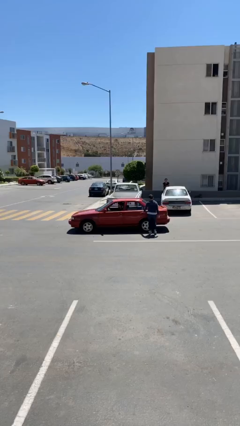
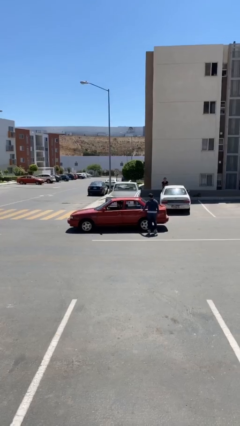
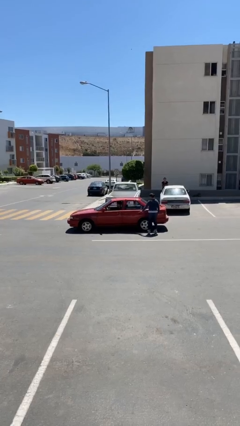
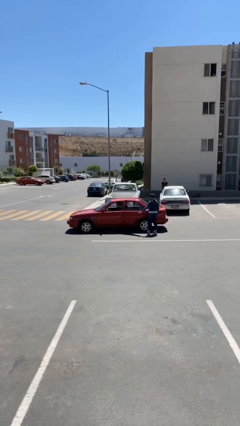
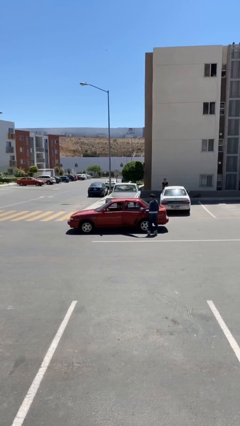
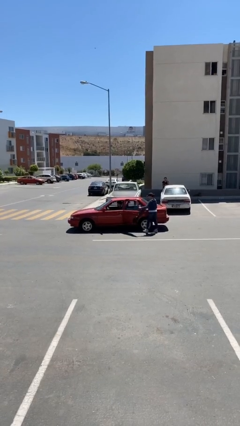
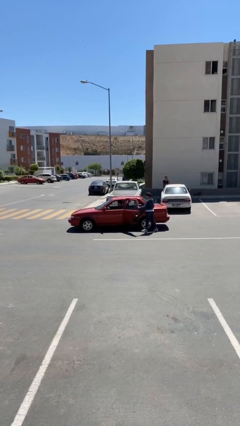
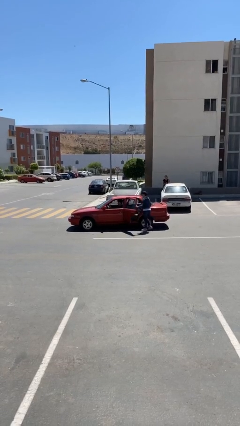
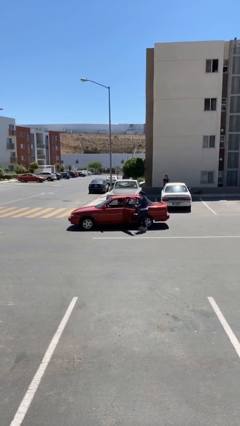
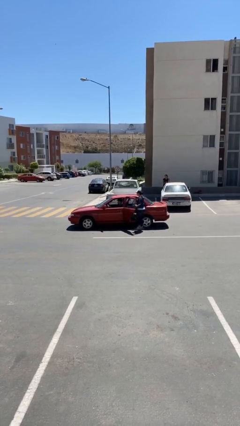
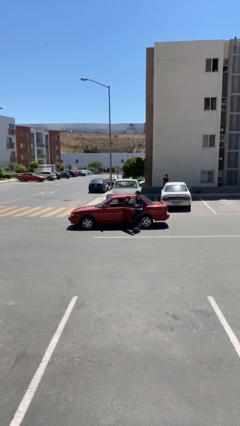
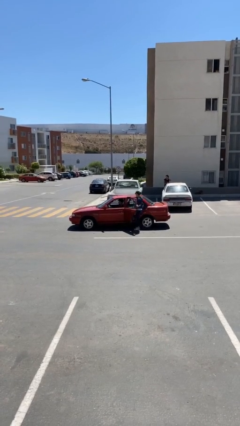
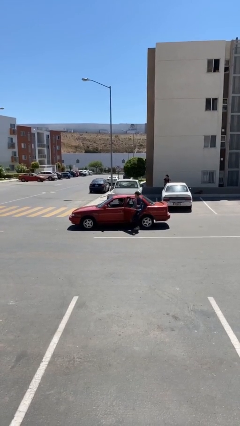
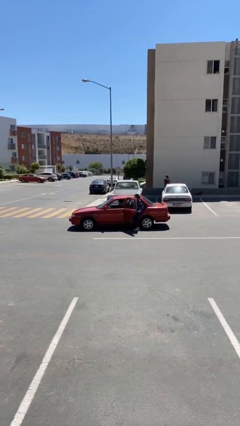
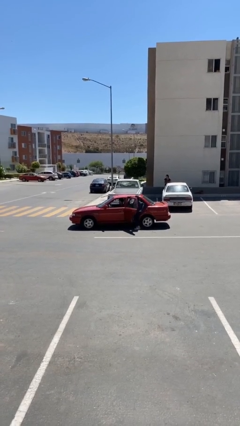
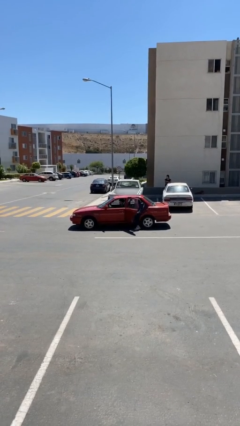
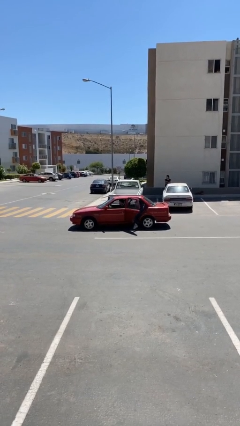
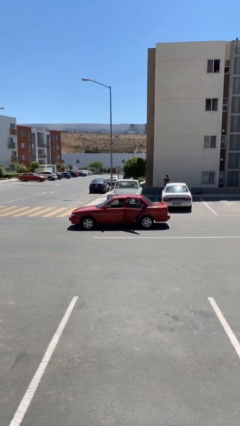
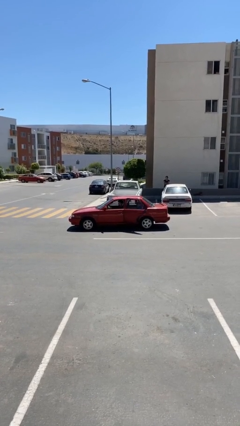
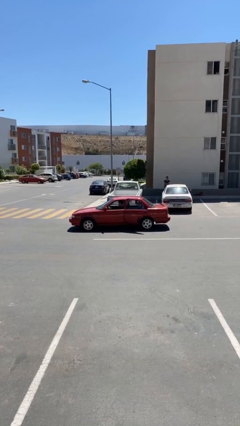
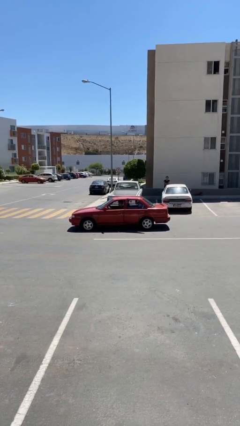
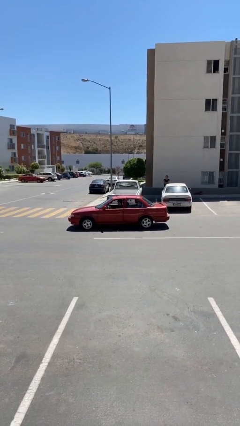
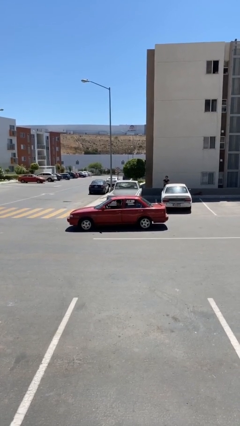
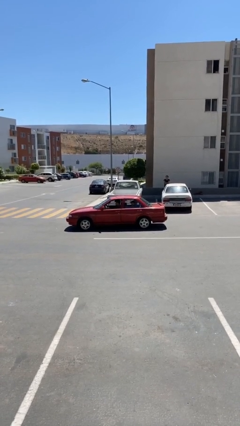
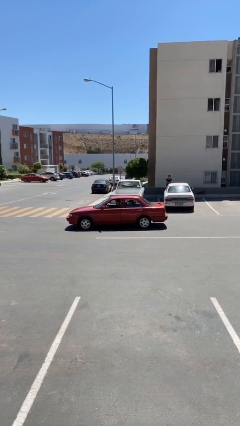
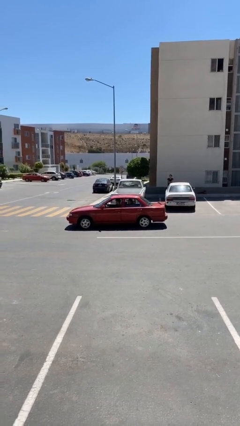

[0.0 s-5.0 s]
car picks up person

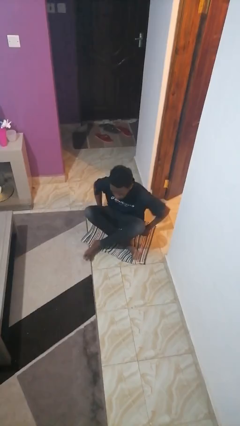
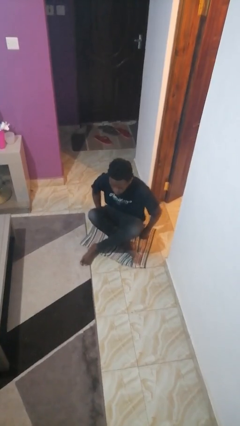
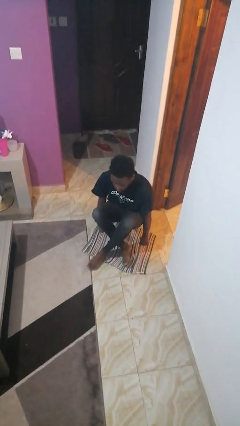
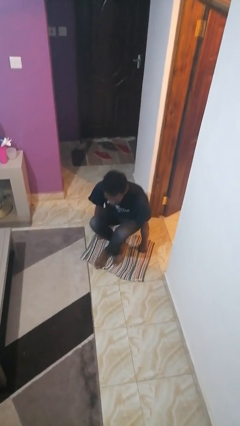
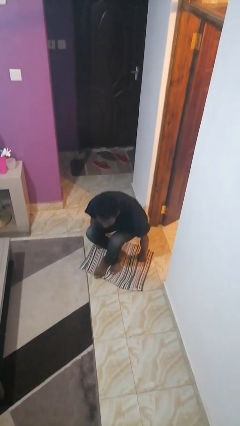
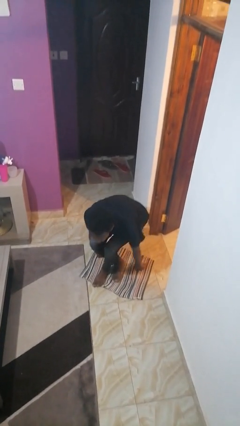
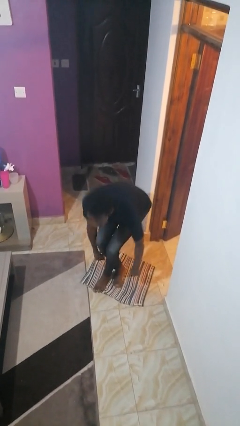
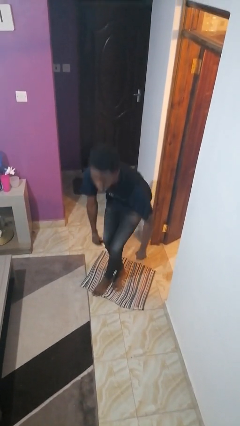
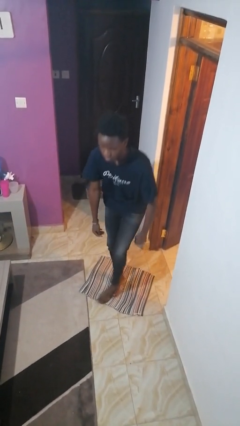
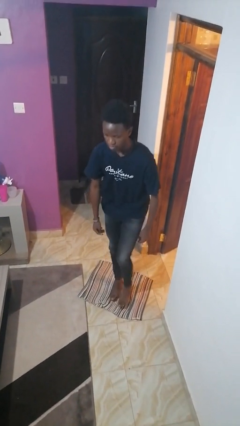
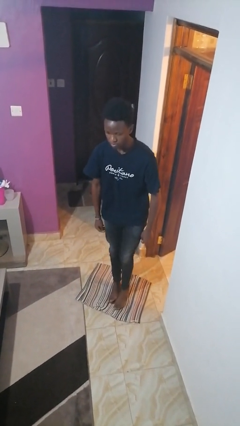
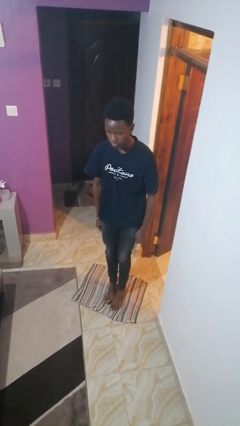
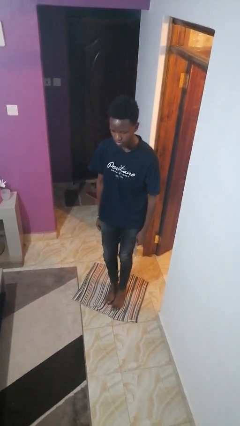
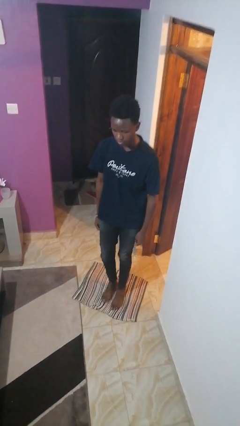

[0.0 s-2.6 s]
person stands up from floor

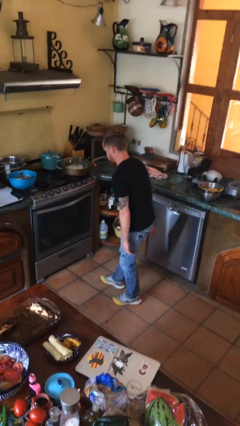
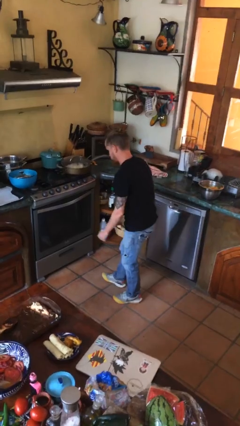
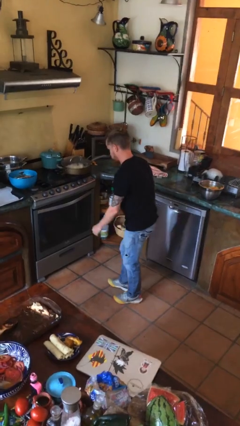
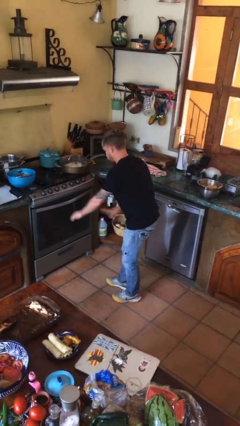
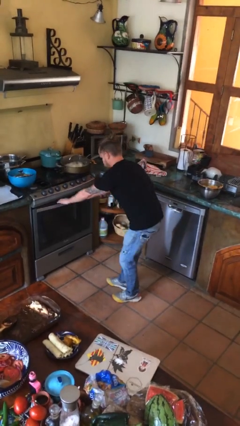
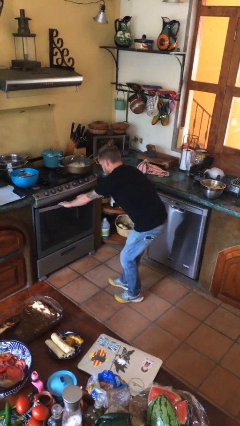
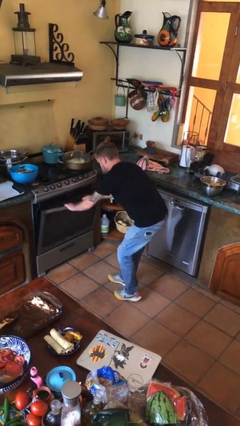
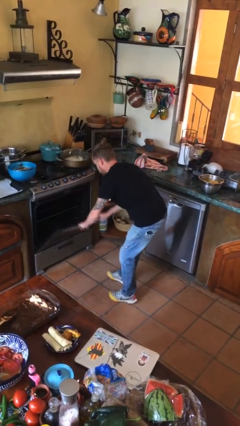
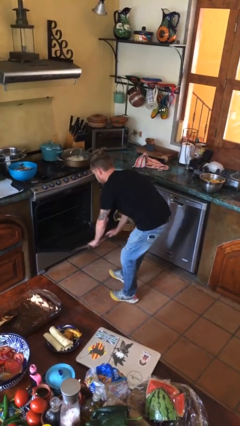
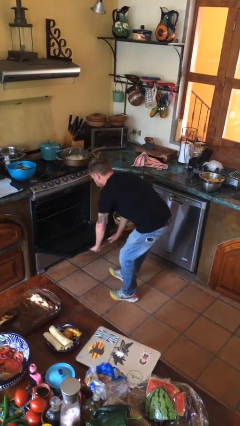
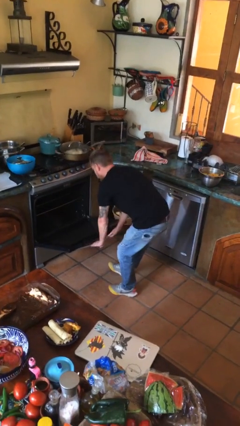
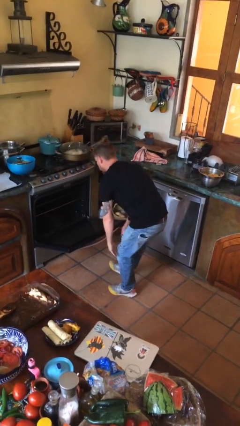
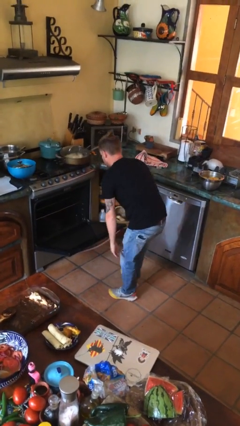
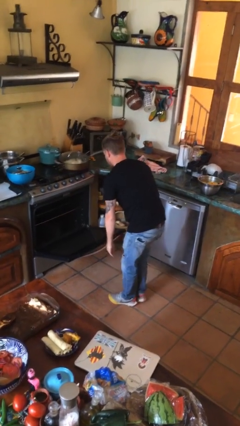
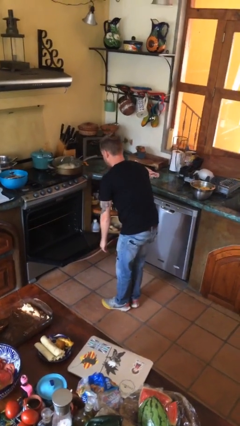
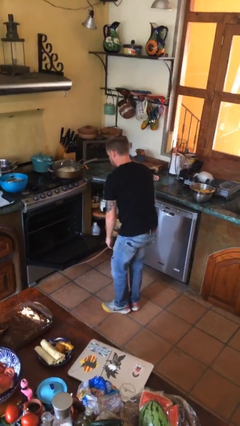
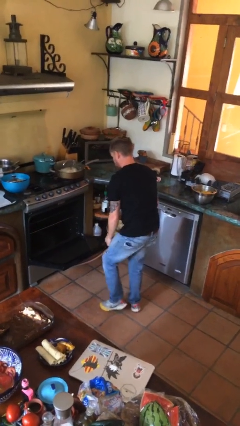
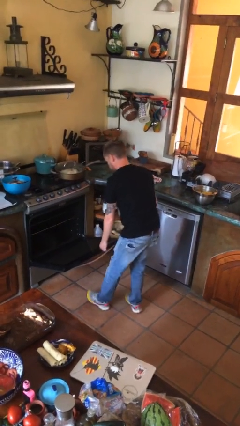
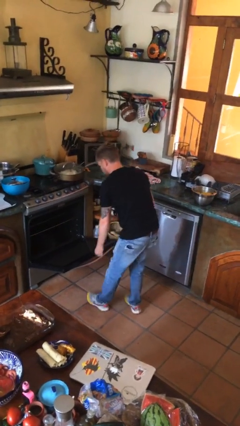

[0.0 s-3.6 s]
person opens oven door

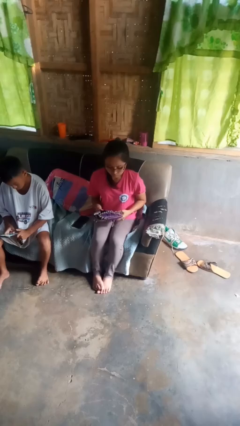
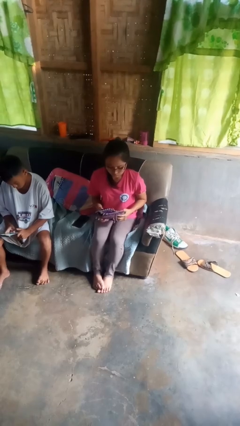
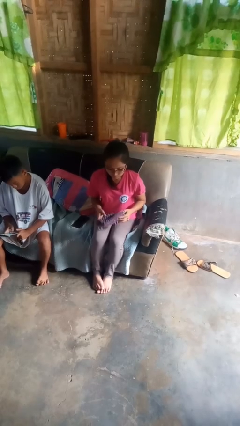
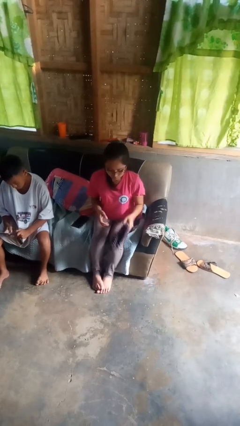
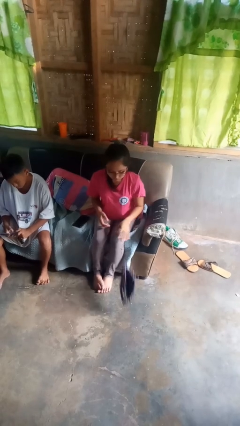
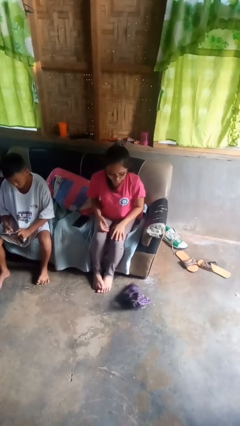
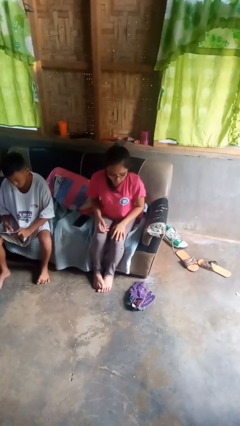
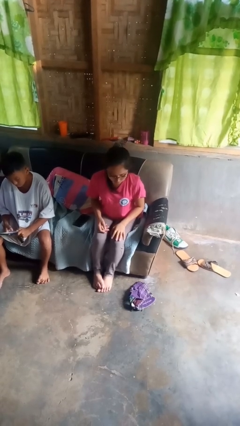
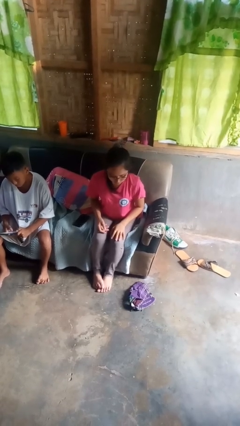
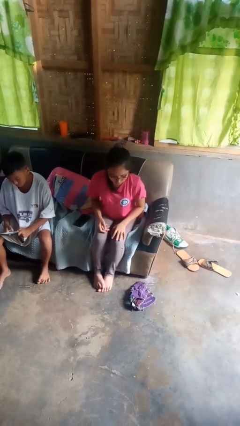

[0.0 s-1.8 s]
person drops object

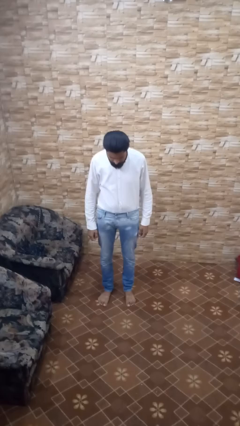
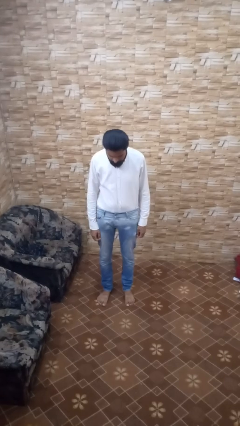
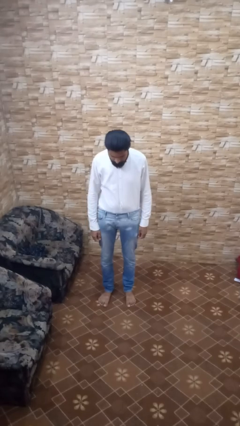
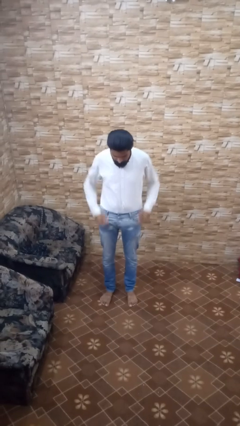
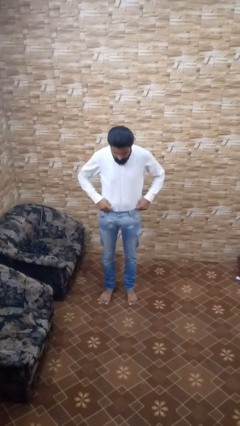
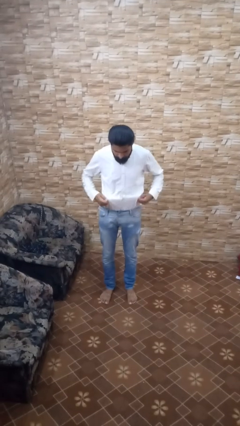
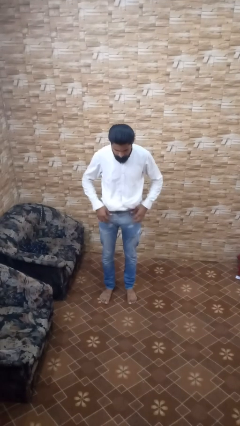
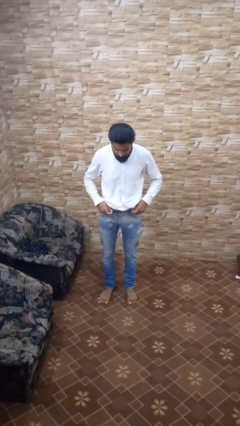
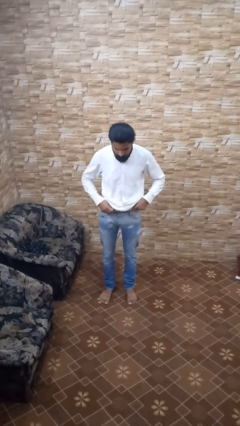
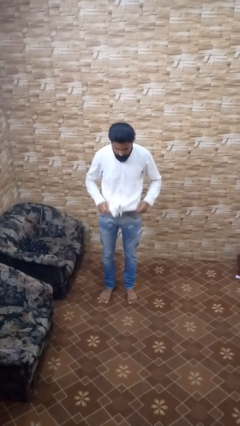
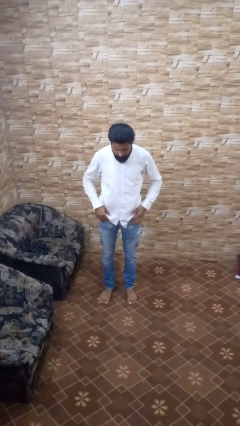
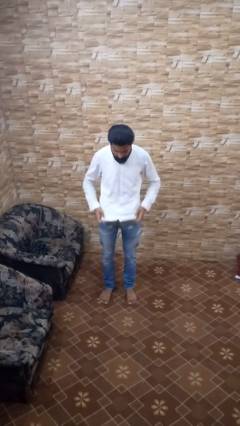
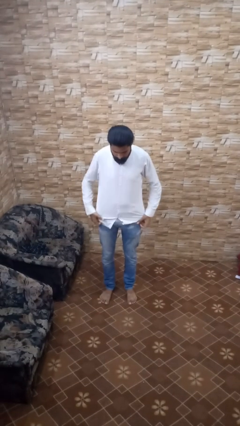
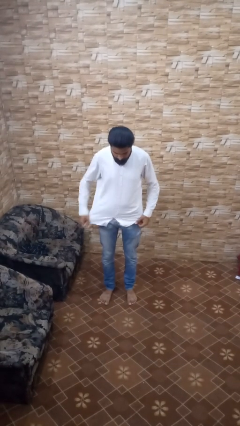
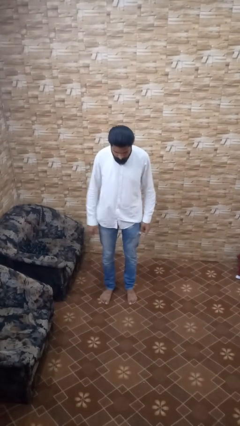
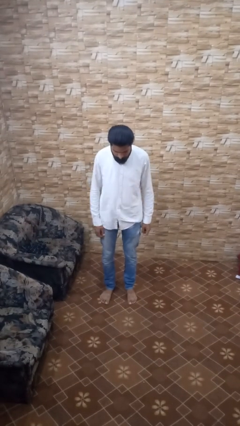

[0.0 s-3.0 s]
person untucks shirt

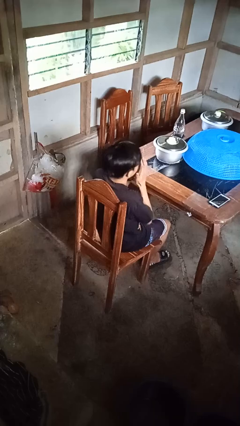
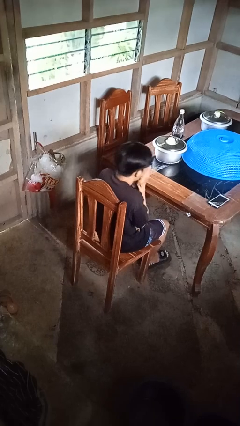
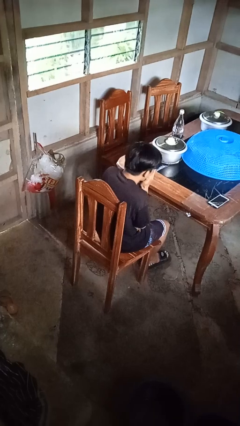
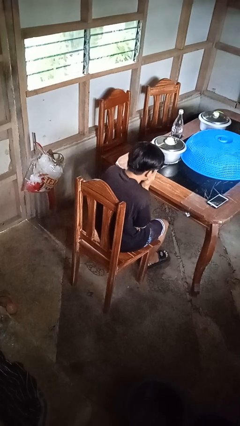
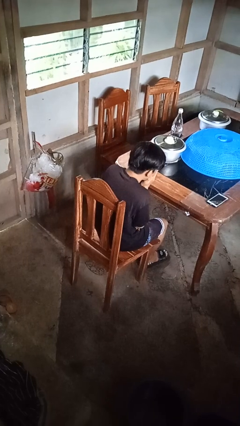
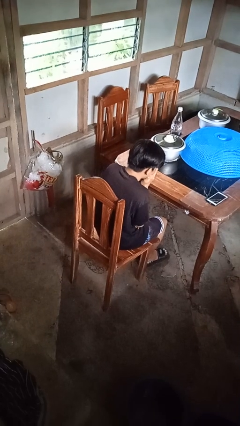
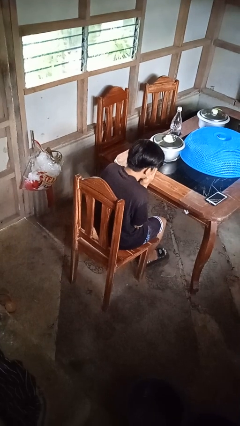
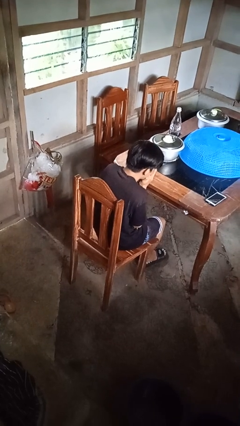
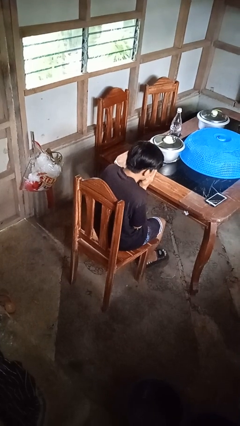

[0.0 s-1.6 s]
person sneezes into hand
